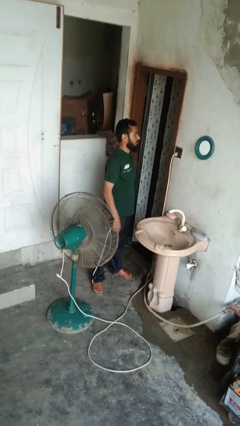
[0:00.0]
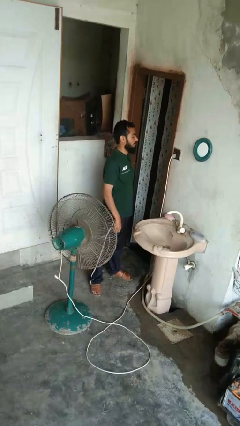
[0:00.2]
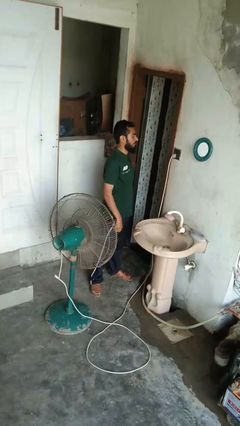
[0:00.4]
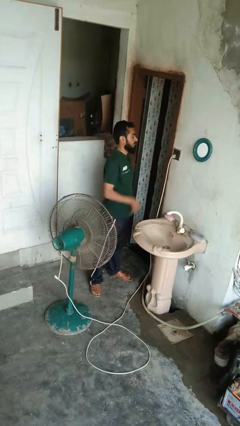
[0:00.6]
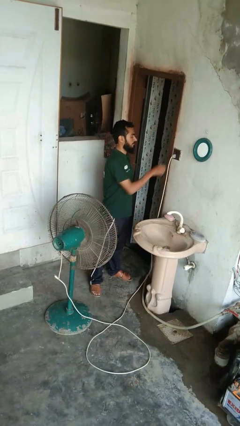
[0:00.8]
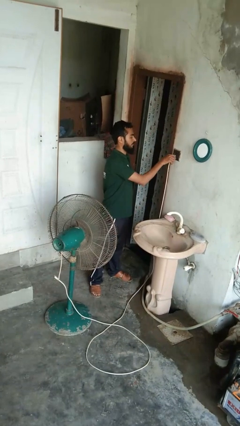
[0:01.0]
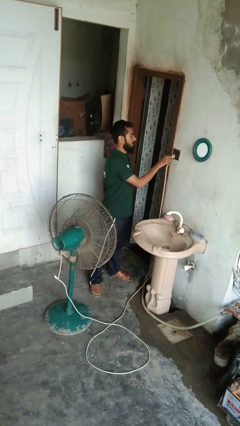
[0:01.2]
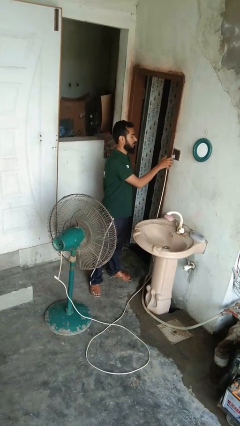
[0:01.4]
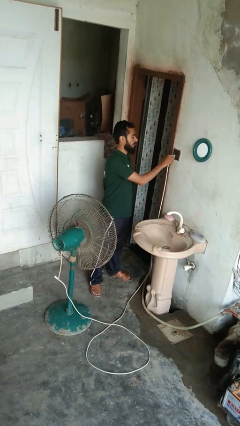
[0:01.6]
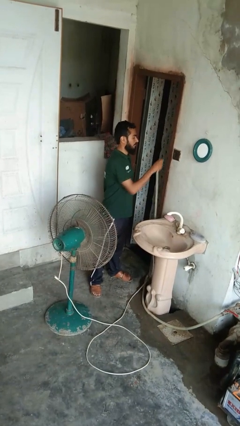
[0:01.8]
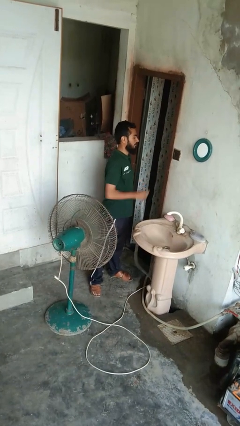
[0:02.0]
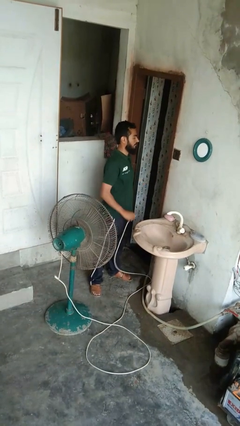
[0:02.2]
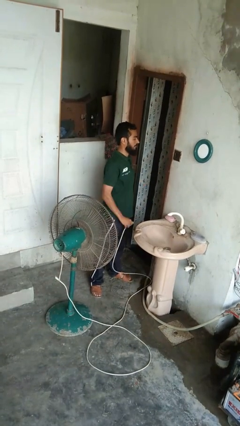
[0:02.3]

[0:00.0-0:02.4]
person turns off fan

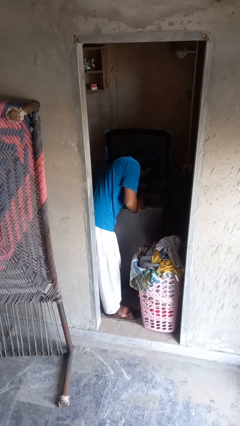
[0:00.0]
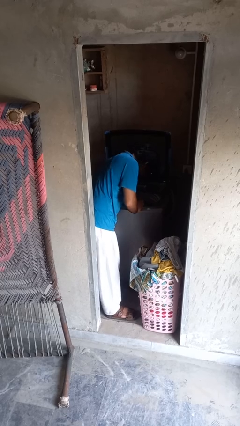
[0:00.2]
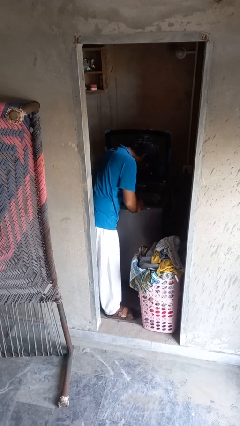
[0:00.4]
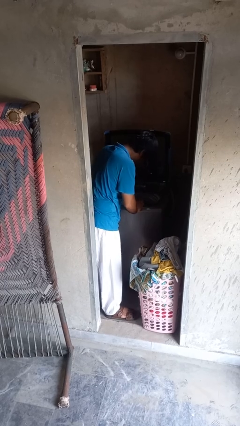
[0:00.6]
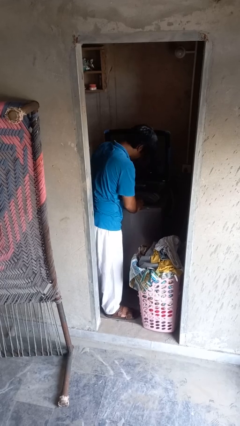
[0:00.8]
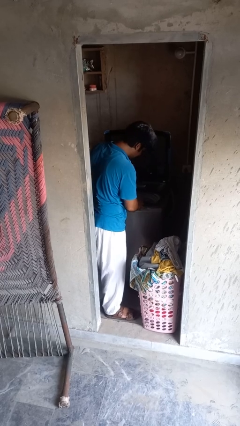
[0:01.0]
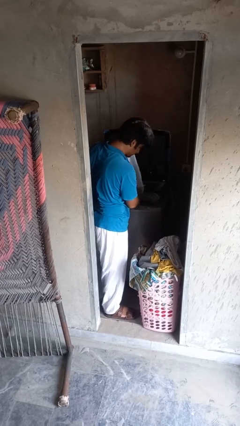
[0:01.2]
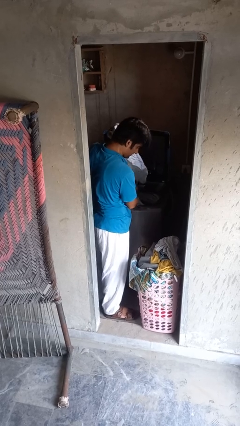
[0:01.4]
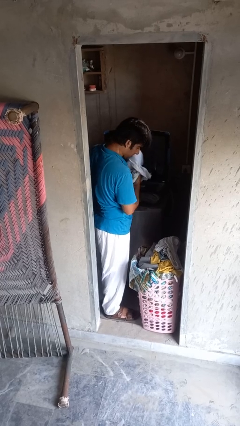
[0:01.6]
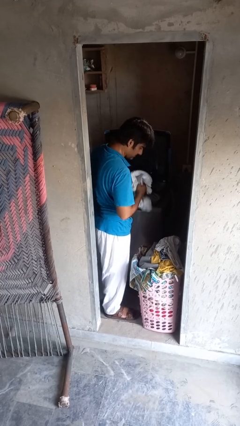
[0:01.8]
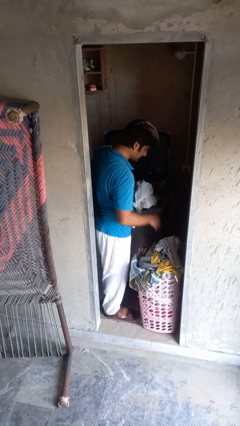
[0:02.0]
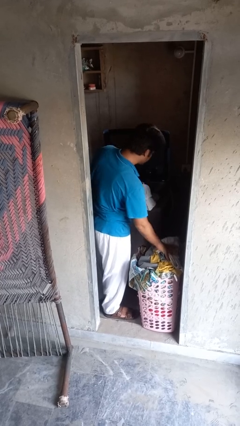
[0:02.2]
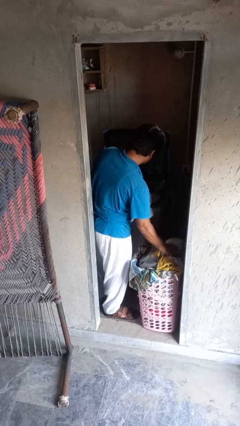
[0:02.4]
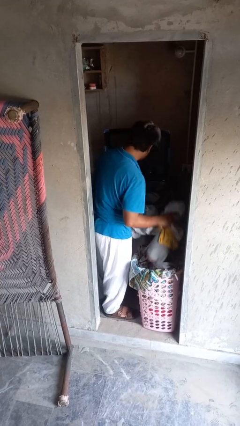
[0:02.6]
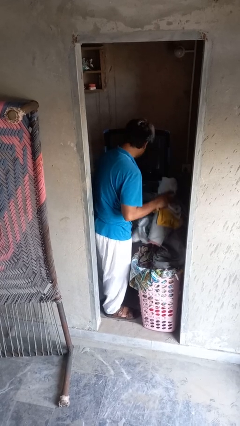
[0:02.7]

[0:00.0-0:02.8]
person loads clotheswasher

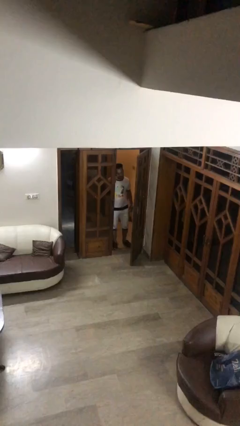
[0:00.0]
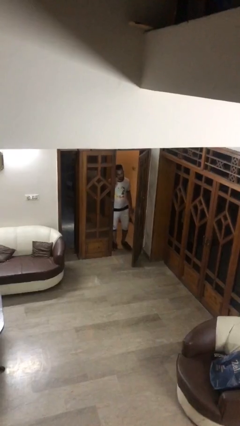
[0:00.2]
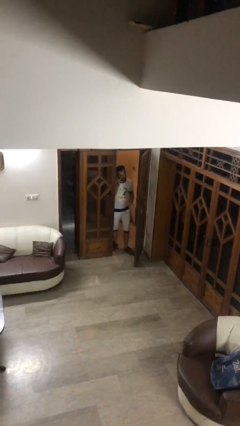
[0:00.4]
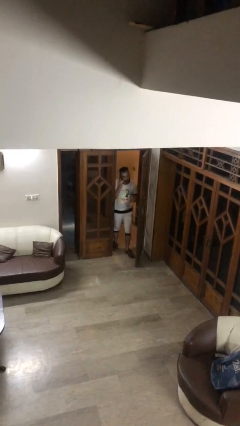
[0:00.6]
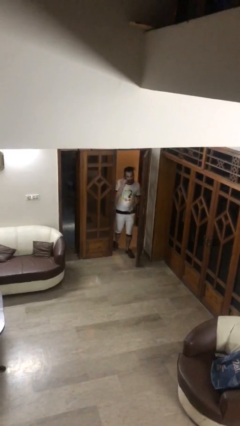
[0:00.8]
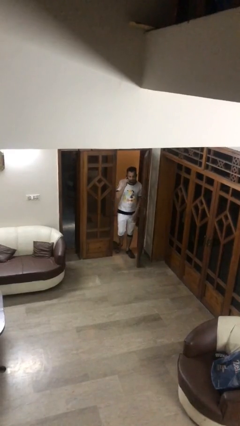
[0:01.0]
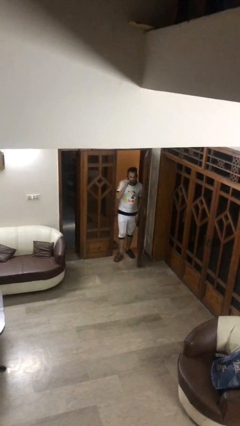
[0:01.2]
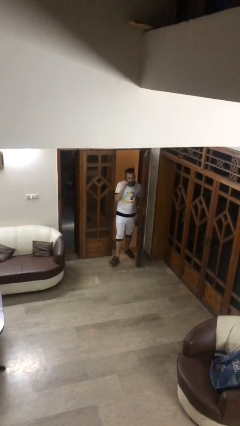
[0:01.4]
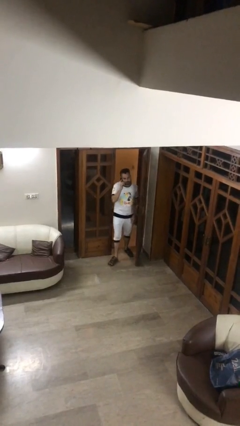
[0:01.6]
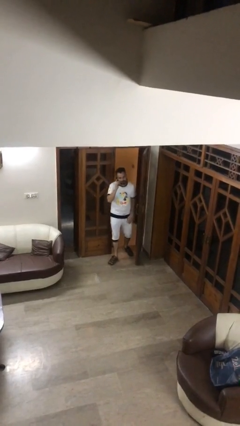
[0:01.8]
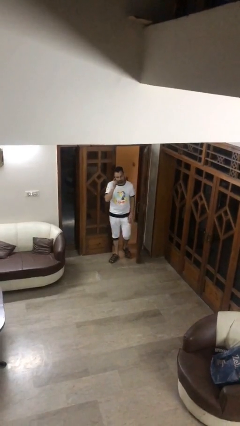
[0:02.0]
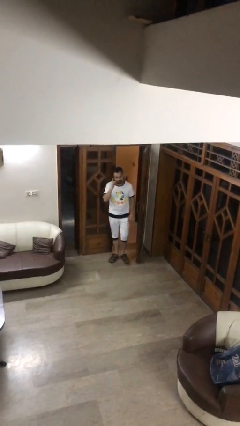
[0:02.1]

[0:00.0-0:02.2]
person enters scene through structure

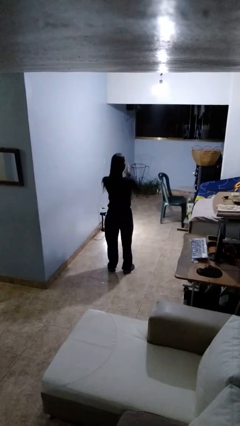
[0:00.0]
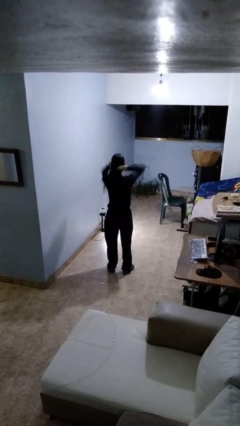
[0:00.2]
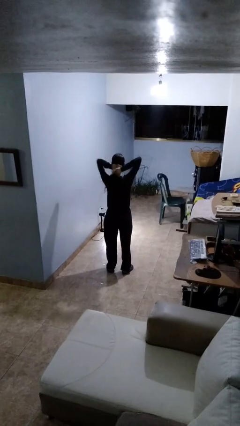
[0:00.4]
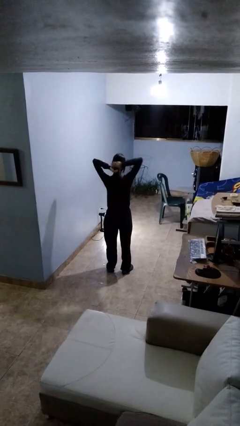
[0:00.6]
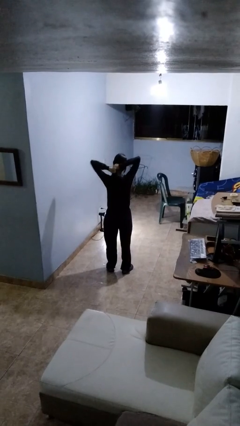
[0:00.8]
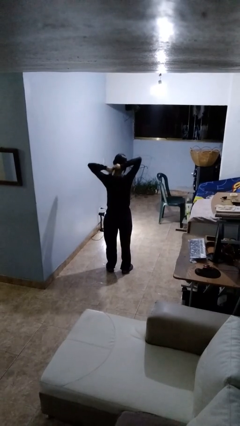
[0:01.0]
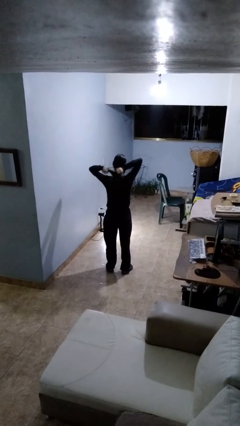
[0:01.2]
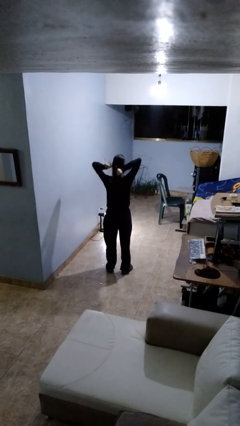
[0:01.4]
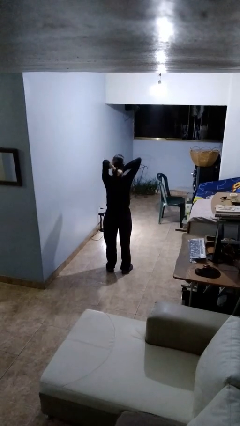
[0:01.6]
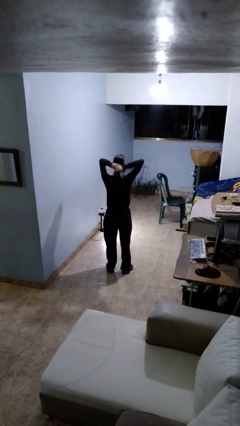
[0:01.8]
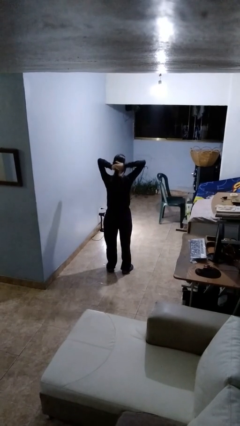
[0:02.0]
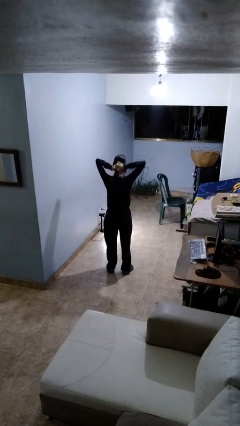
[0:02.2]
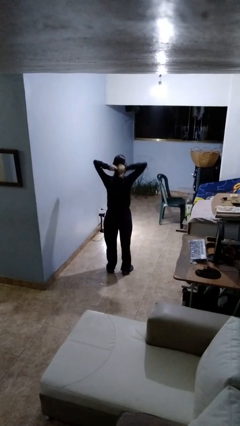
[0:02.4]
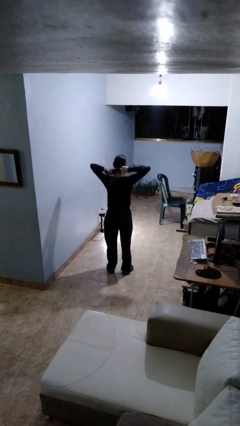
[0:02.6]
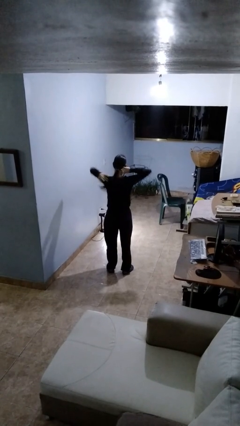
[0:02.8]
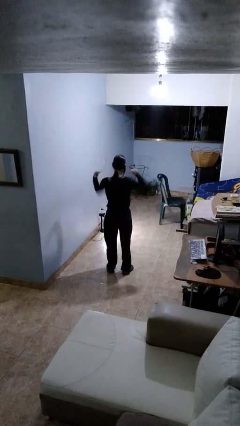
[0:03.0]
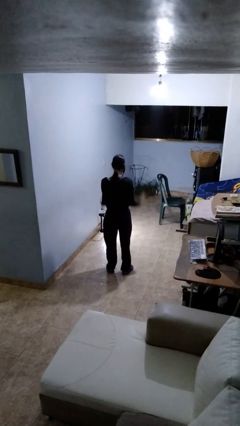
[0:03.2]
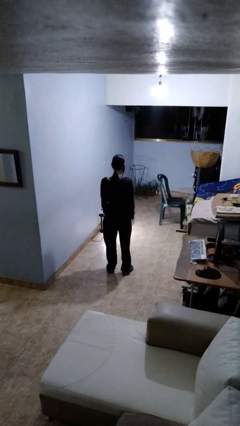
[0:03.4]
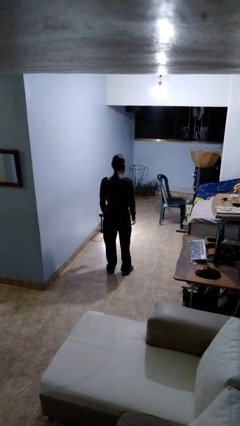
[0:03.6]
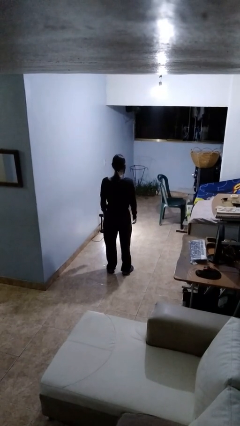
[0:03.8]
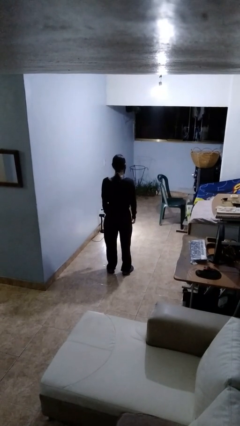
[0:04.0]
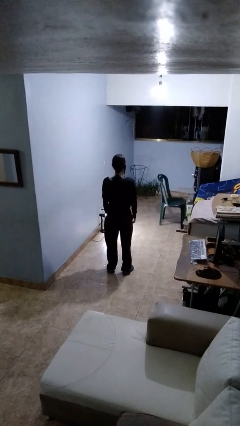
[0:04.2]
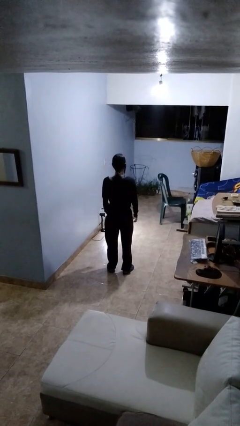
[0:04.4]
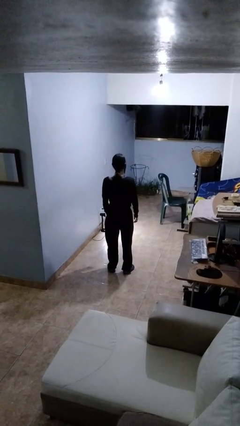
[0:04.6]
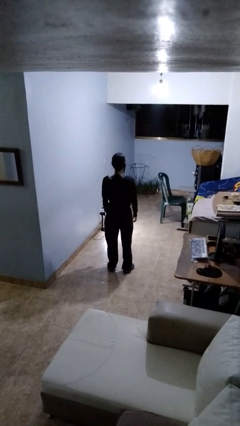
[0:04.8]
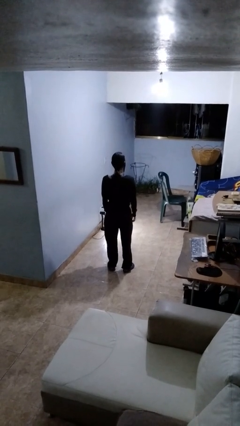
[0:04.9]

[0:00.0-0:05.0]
person puts hair in ponytail

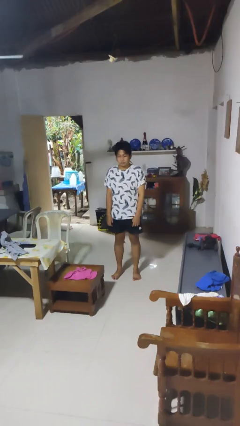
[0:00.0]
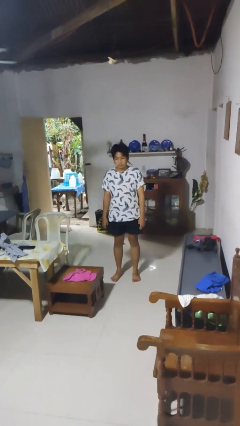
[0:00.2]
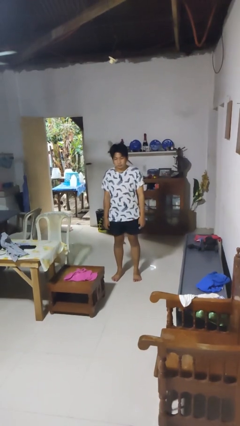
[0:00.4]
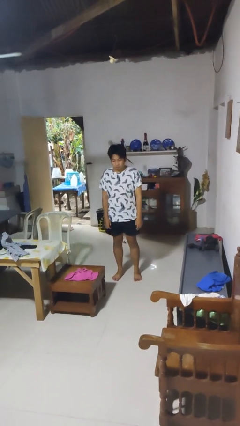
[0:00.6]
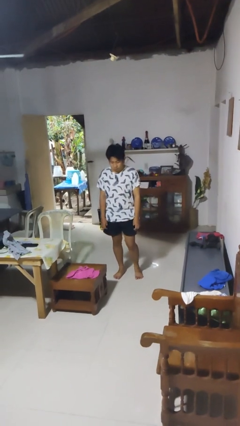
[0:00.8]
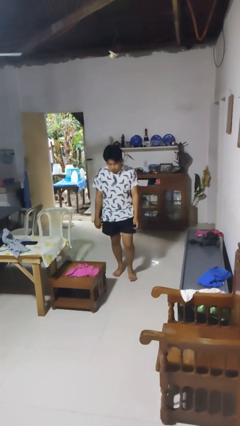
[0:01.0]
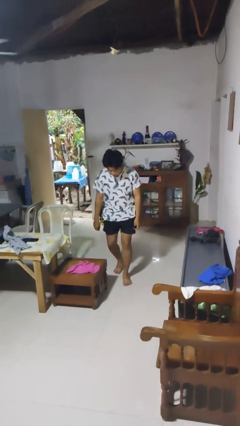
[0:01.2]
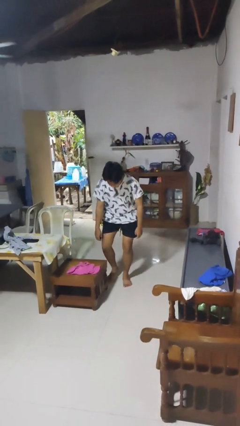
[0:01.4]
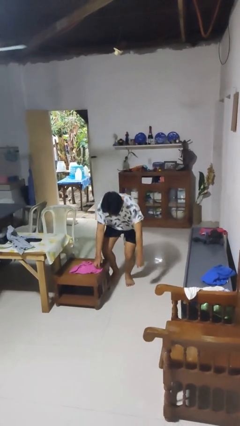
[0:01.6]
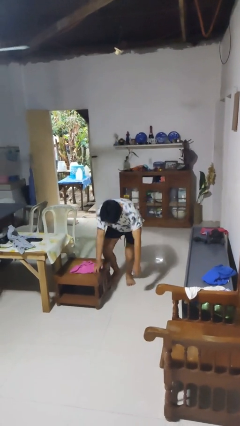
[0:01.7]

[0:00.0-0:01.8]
person trips on object on floor

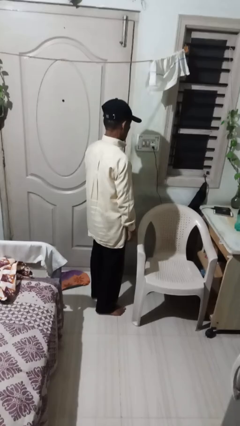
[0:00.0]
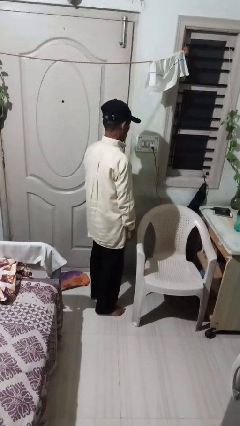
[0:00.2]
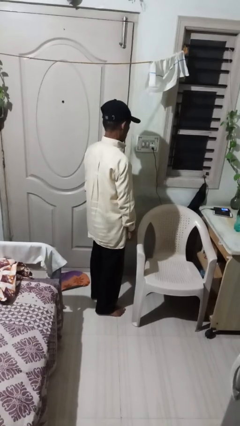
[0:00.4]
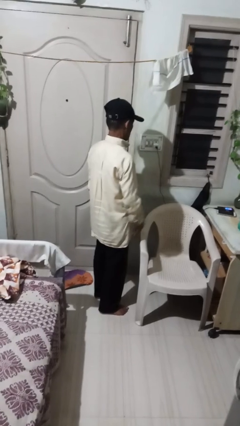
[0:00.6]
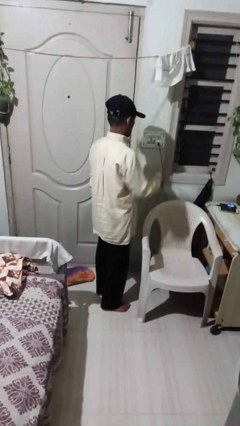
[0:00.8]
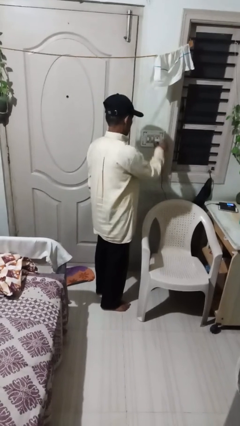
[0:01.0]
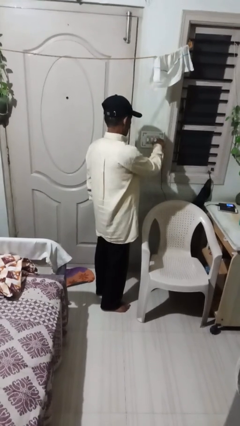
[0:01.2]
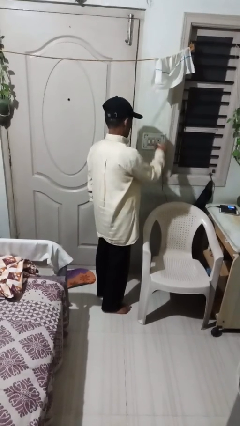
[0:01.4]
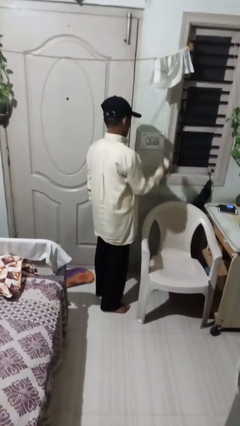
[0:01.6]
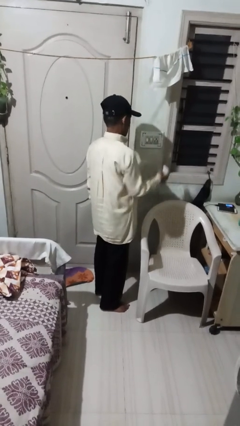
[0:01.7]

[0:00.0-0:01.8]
person unplugs from electrical socket

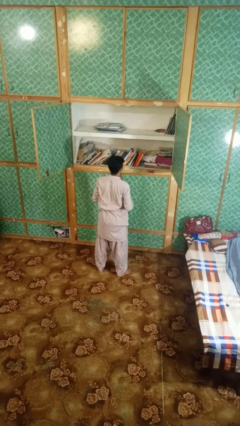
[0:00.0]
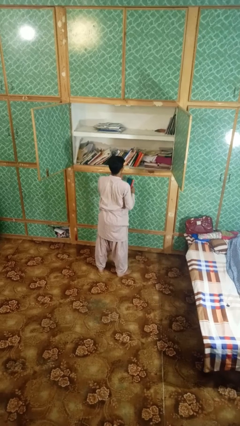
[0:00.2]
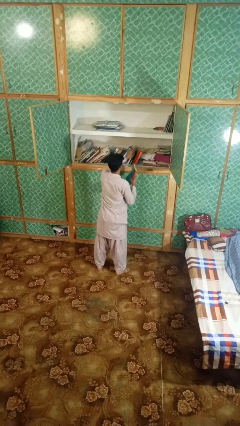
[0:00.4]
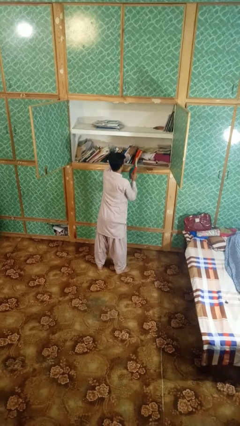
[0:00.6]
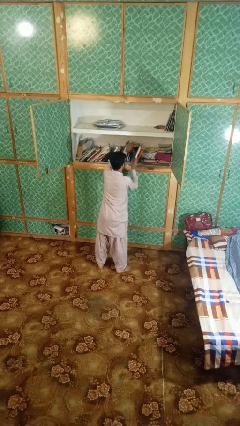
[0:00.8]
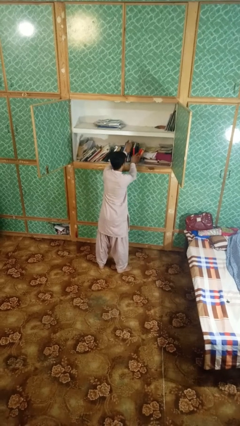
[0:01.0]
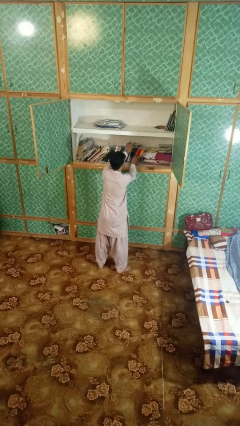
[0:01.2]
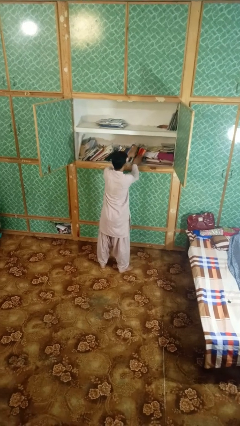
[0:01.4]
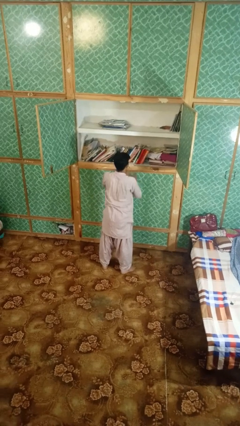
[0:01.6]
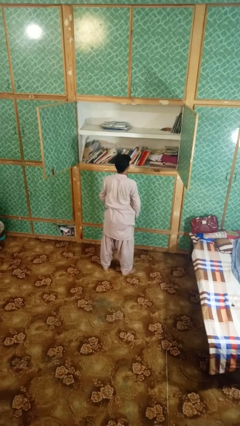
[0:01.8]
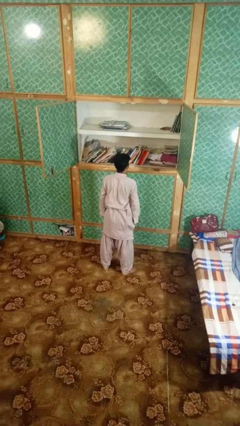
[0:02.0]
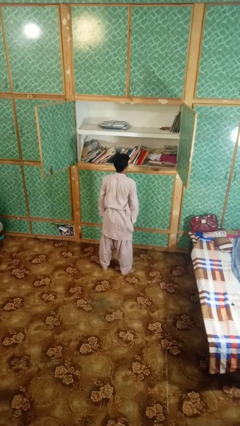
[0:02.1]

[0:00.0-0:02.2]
person puts down object on shelf
